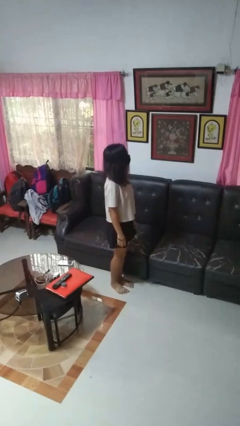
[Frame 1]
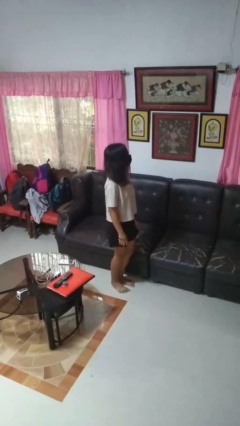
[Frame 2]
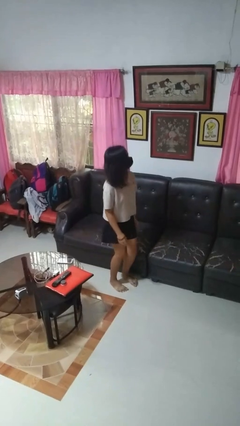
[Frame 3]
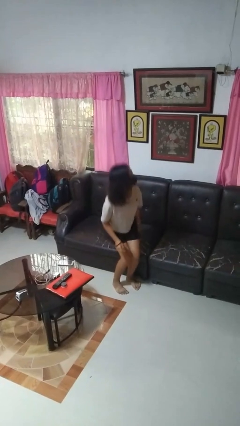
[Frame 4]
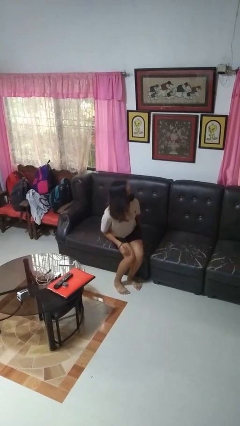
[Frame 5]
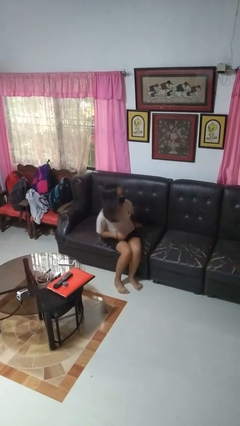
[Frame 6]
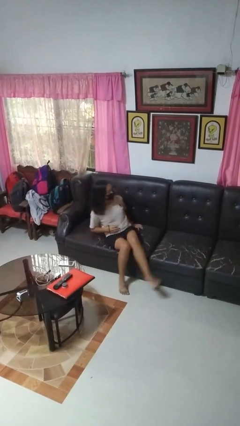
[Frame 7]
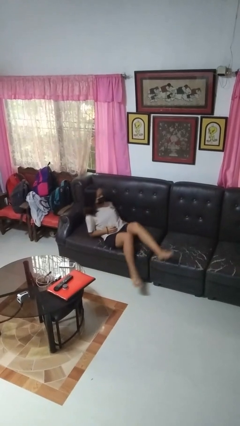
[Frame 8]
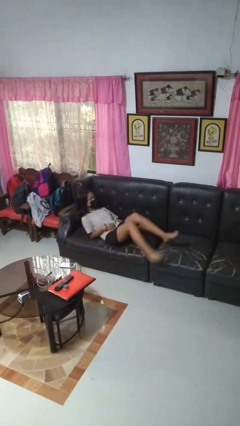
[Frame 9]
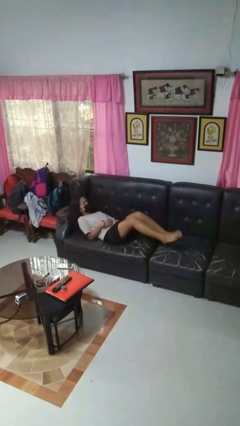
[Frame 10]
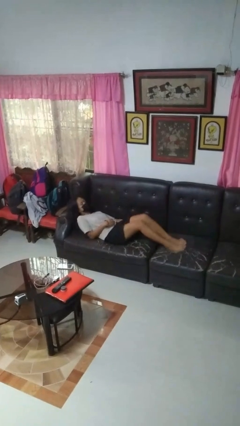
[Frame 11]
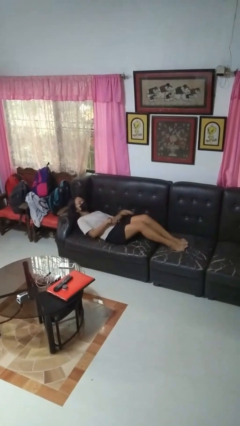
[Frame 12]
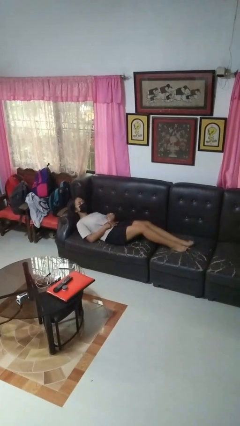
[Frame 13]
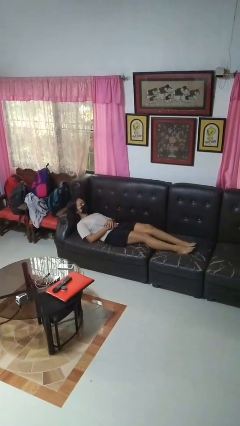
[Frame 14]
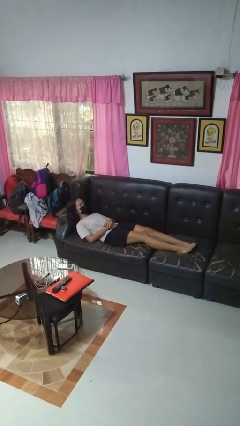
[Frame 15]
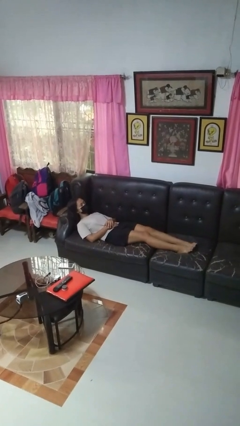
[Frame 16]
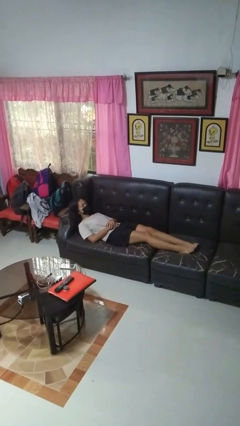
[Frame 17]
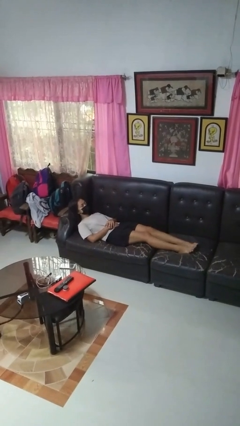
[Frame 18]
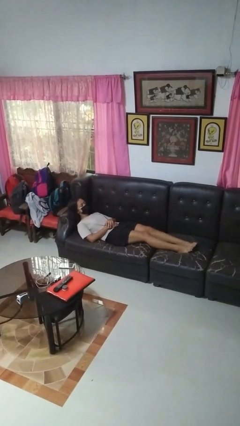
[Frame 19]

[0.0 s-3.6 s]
person lies down on couch

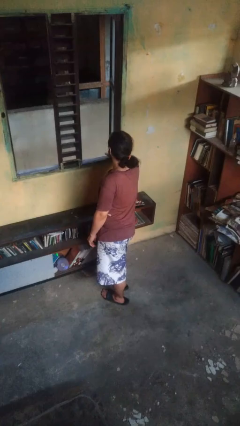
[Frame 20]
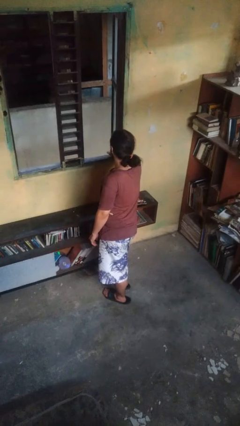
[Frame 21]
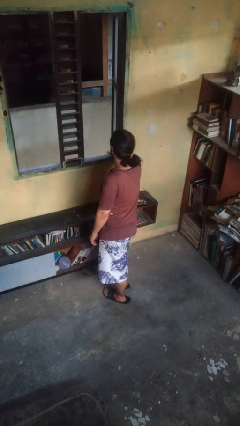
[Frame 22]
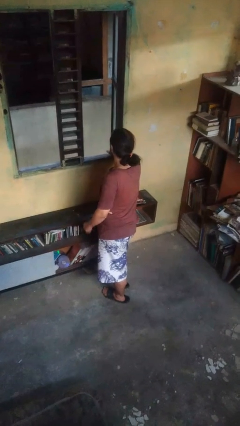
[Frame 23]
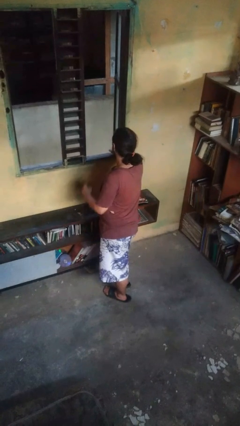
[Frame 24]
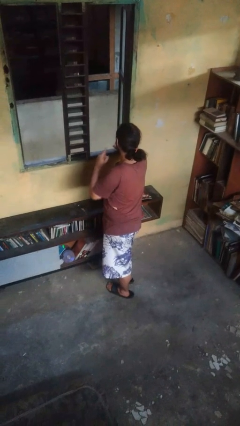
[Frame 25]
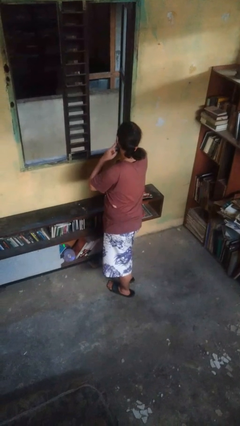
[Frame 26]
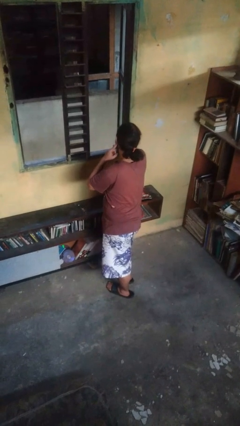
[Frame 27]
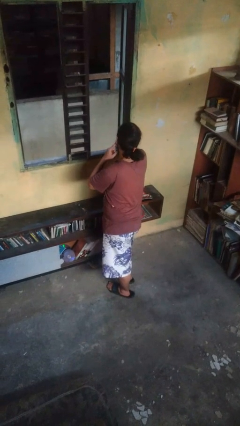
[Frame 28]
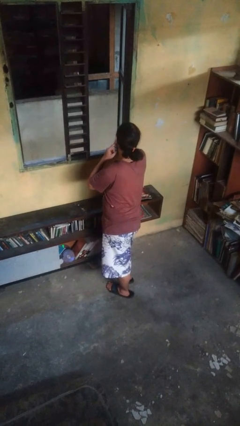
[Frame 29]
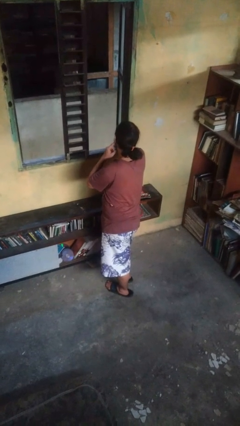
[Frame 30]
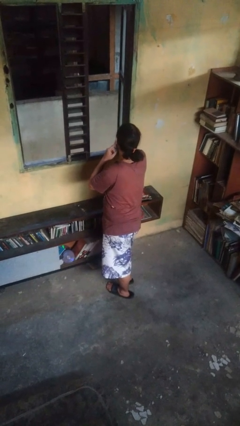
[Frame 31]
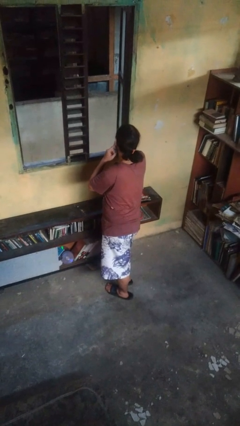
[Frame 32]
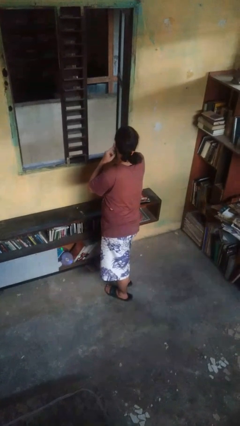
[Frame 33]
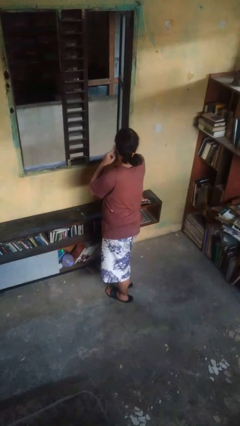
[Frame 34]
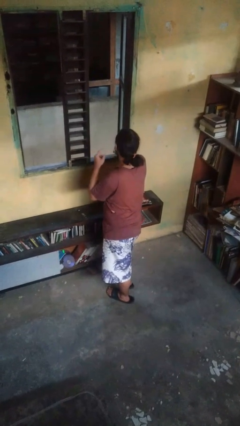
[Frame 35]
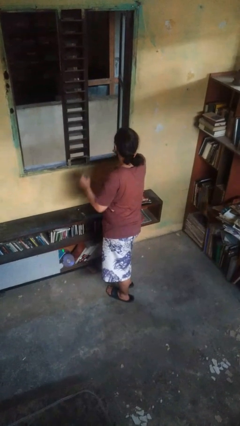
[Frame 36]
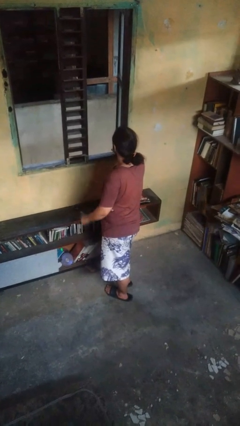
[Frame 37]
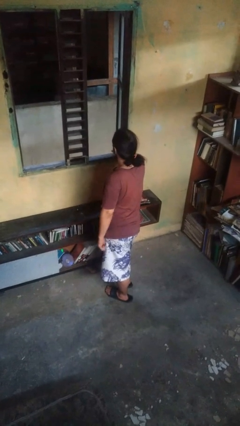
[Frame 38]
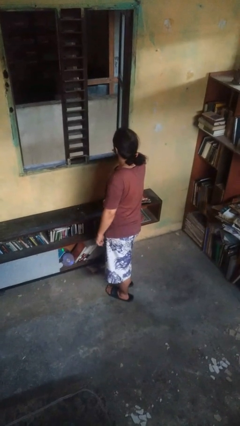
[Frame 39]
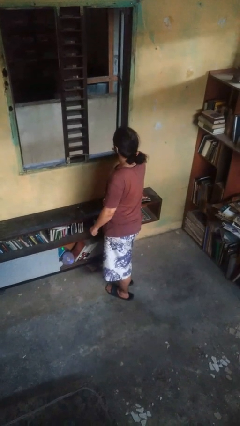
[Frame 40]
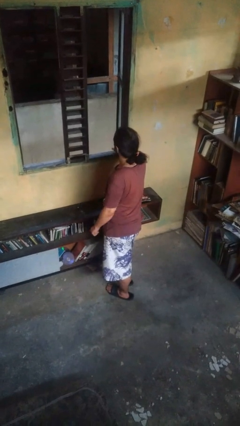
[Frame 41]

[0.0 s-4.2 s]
person gestures listen closely

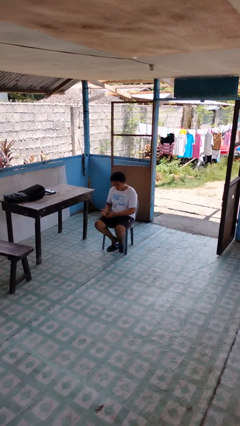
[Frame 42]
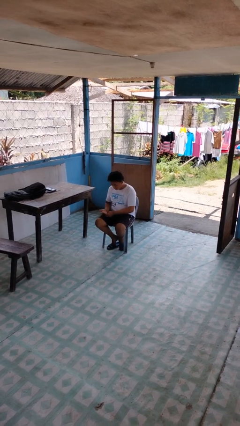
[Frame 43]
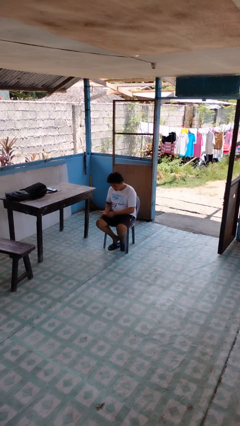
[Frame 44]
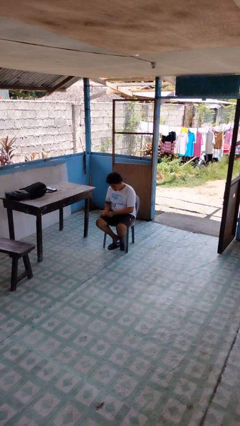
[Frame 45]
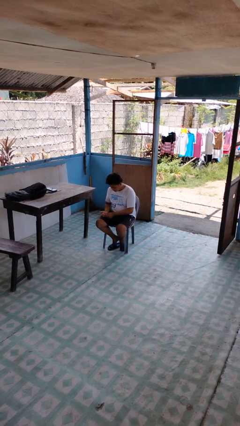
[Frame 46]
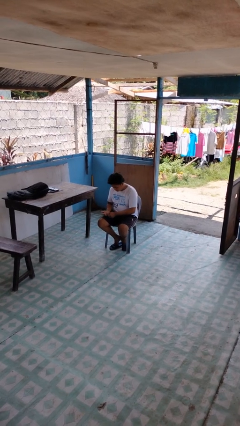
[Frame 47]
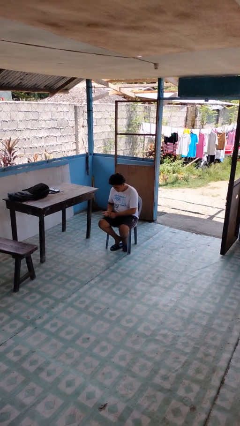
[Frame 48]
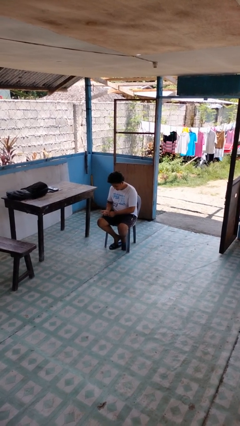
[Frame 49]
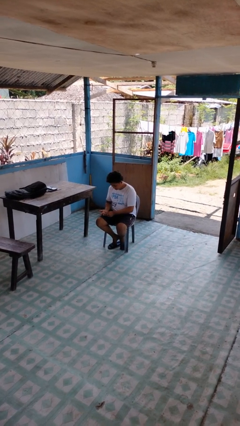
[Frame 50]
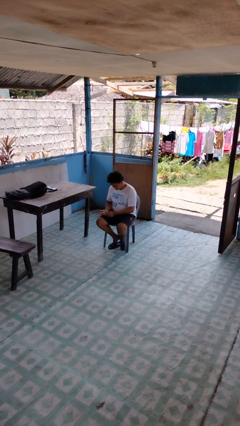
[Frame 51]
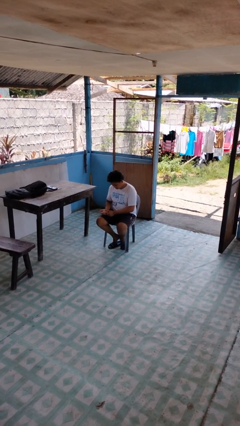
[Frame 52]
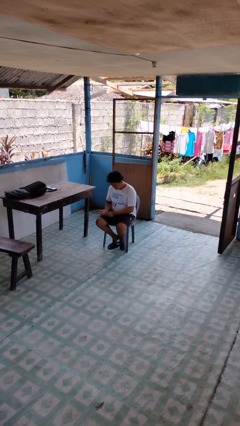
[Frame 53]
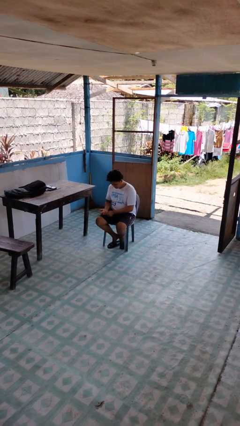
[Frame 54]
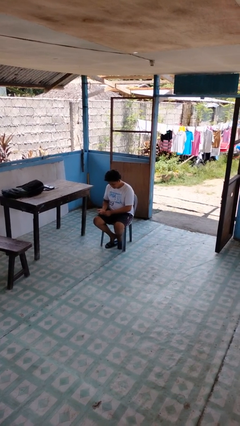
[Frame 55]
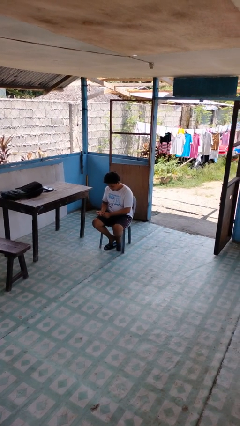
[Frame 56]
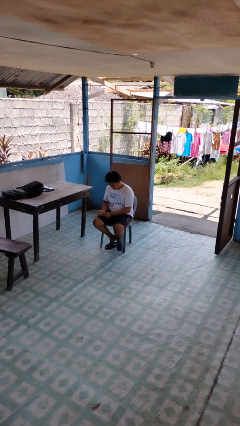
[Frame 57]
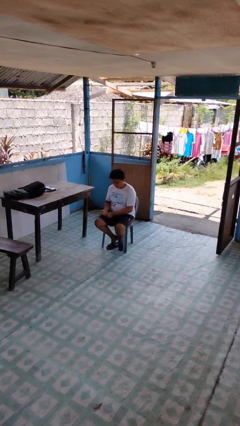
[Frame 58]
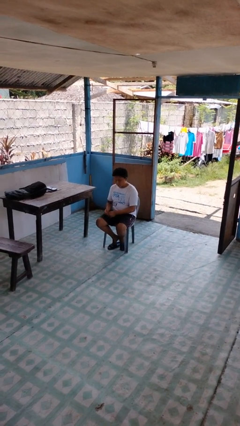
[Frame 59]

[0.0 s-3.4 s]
person looks at hands in lap

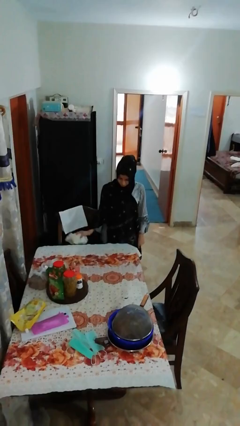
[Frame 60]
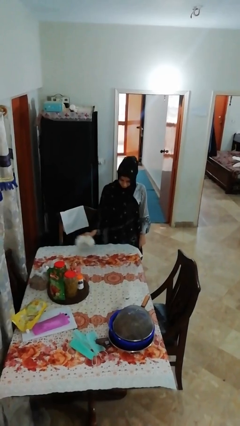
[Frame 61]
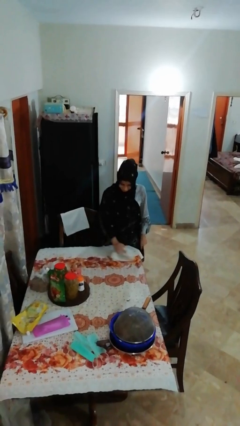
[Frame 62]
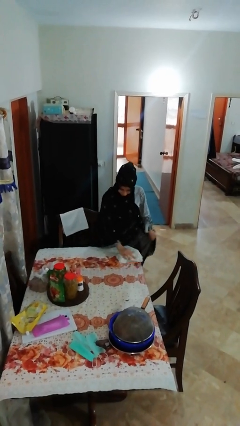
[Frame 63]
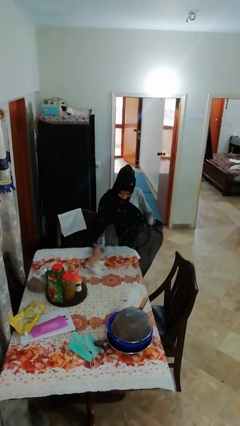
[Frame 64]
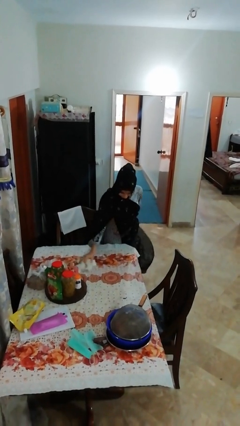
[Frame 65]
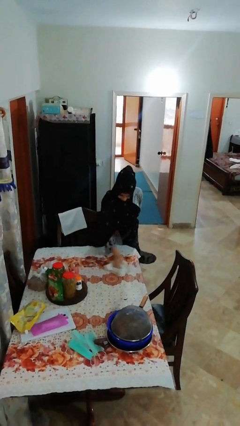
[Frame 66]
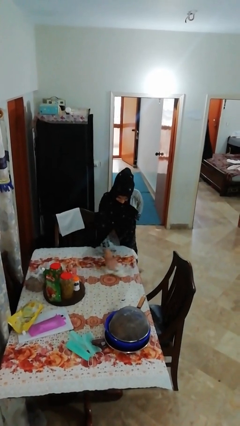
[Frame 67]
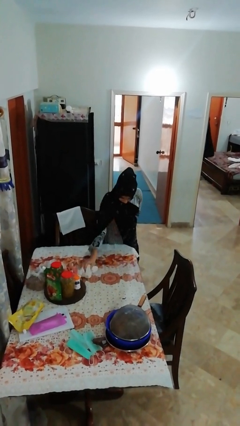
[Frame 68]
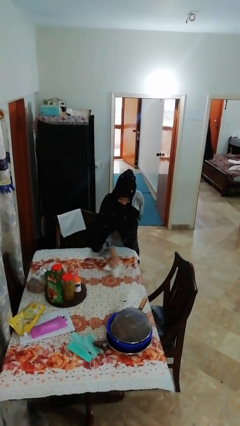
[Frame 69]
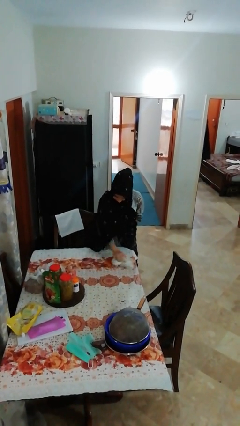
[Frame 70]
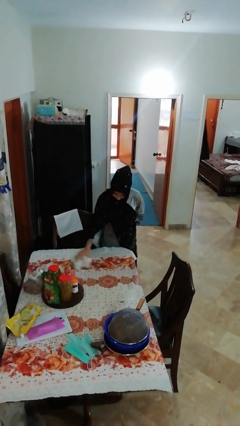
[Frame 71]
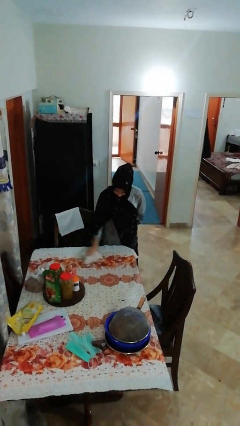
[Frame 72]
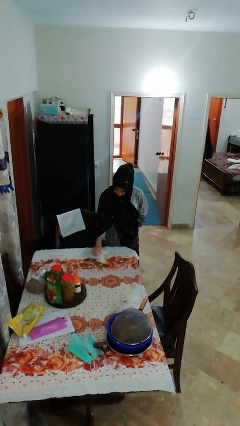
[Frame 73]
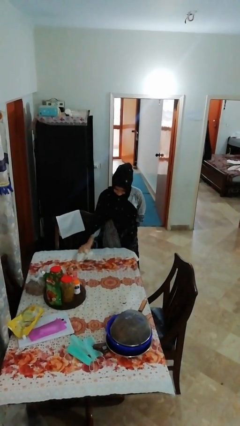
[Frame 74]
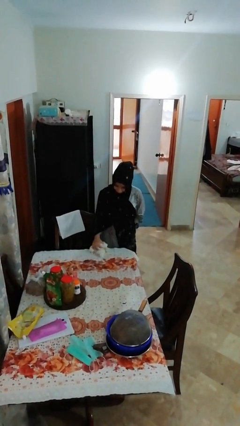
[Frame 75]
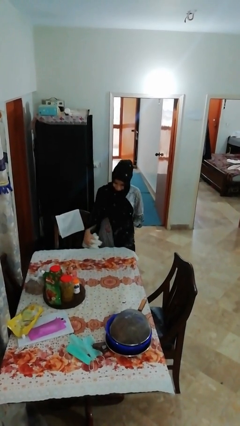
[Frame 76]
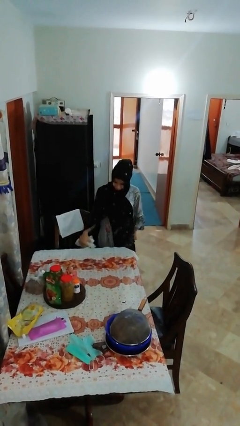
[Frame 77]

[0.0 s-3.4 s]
person cleans table with rag

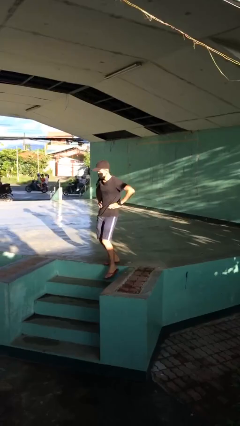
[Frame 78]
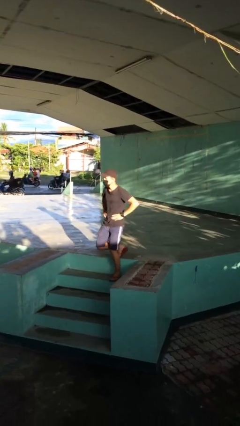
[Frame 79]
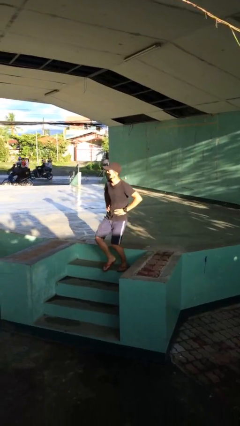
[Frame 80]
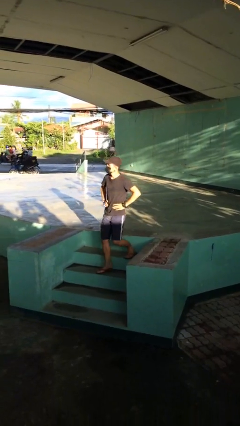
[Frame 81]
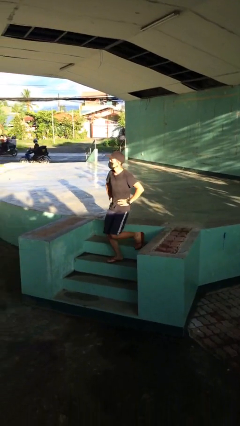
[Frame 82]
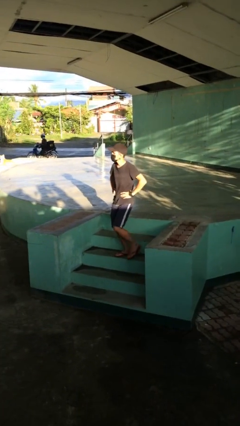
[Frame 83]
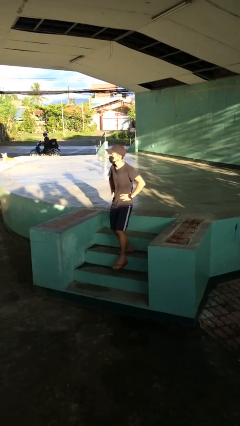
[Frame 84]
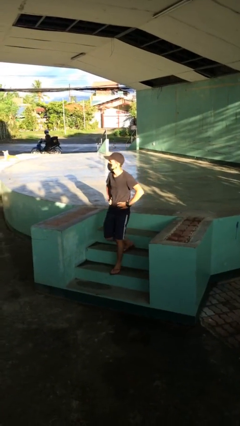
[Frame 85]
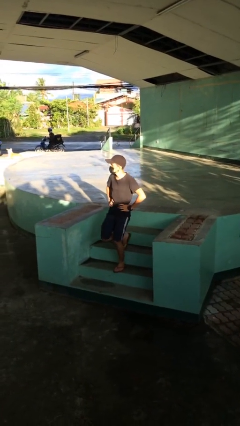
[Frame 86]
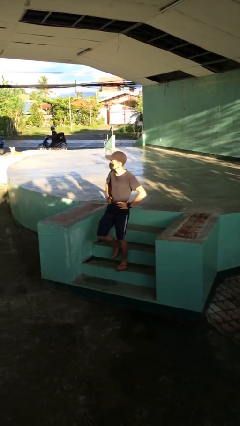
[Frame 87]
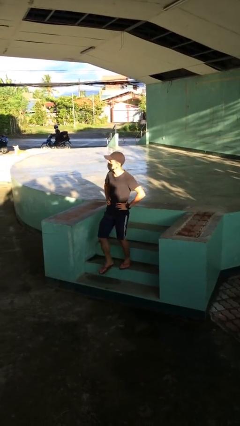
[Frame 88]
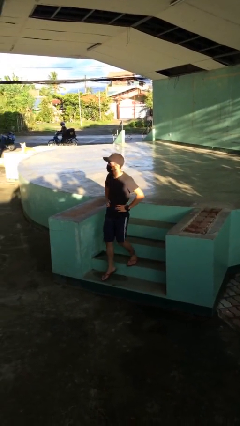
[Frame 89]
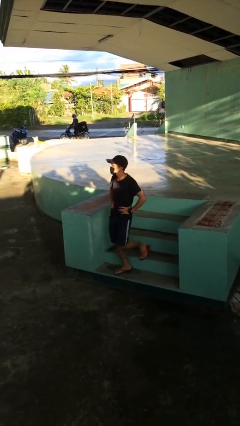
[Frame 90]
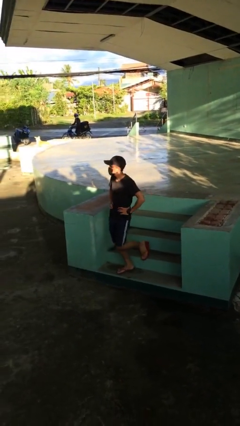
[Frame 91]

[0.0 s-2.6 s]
person climbs down stairs

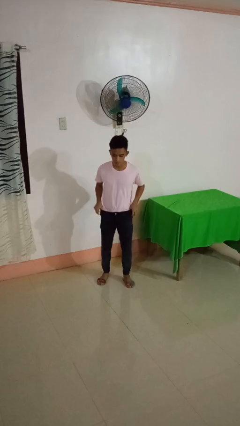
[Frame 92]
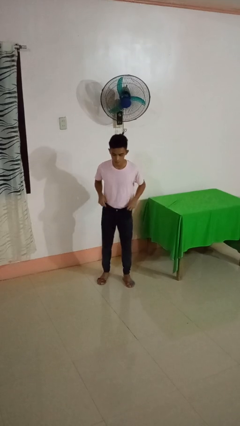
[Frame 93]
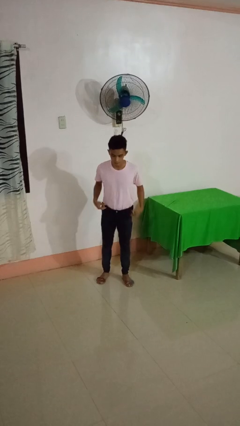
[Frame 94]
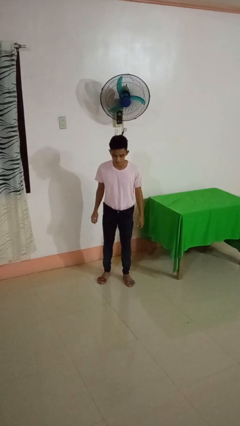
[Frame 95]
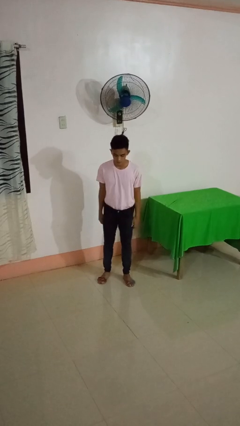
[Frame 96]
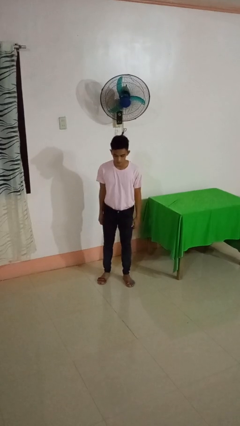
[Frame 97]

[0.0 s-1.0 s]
person hikes up pants
